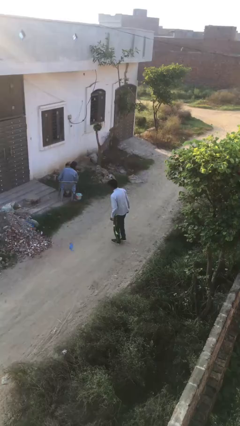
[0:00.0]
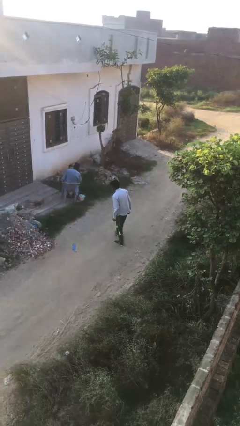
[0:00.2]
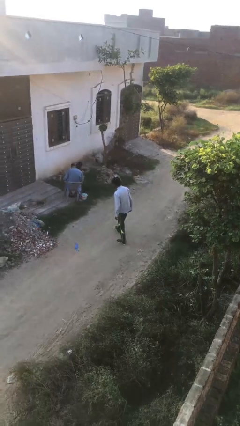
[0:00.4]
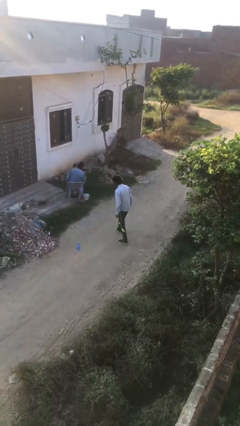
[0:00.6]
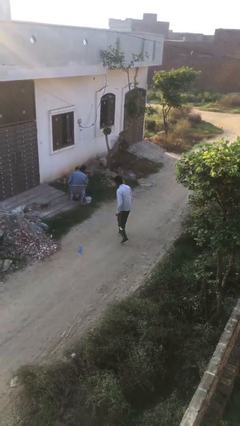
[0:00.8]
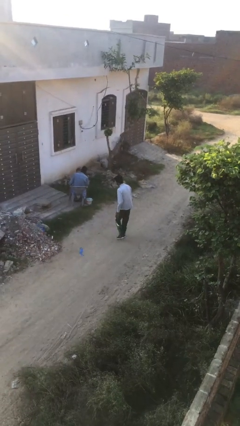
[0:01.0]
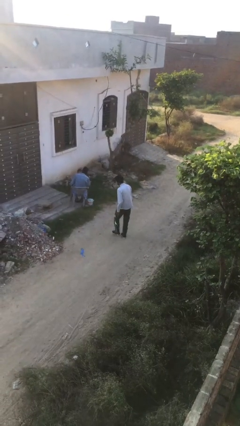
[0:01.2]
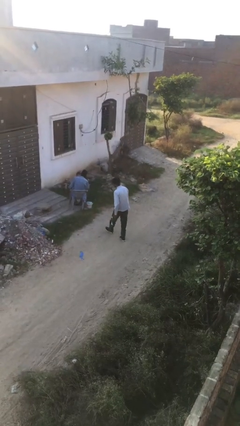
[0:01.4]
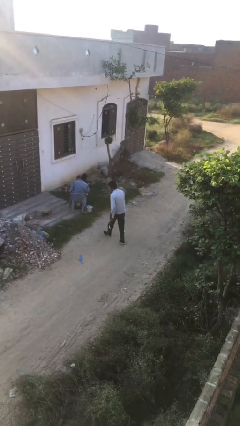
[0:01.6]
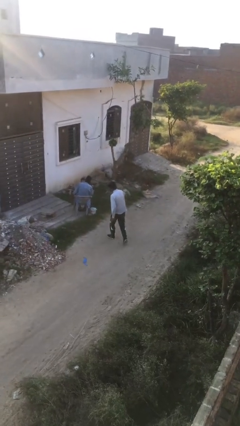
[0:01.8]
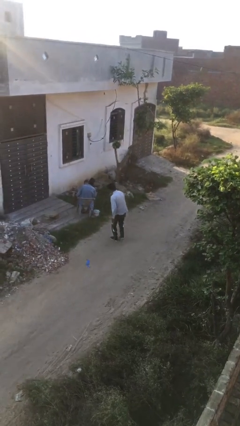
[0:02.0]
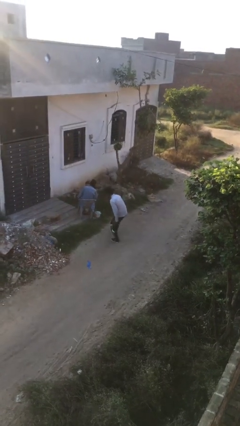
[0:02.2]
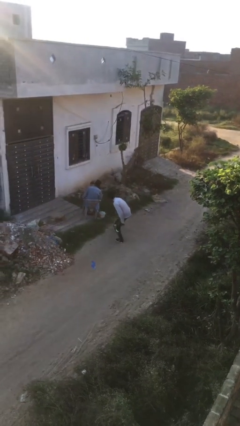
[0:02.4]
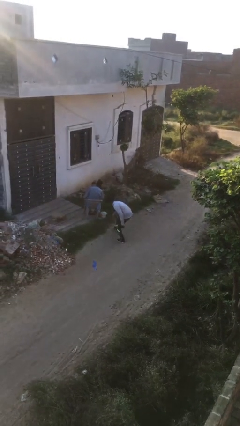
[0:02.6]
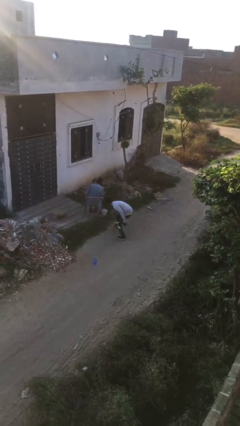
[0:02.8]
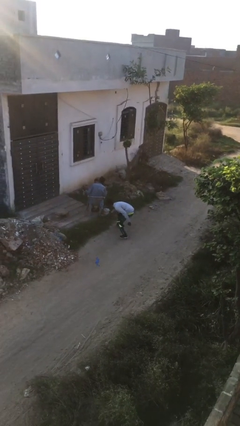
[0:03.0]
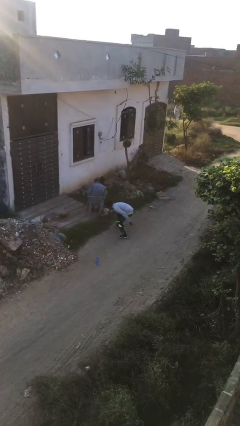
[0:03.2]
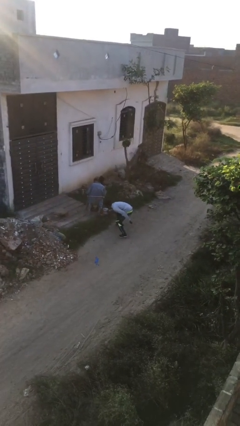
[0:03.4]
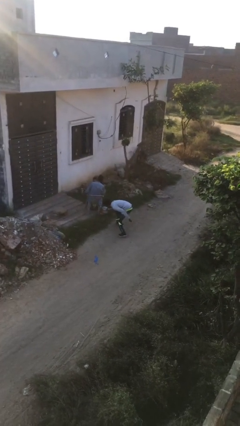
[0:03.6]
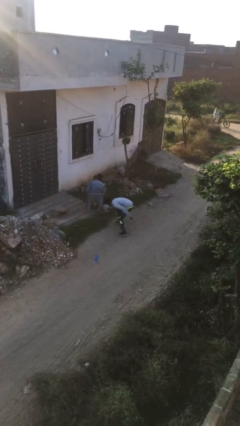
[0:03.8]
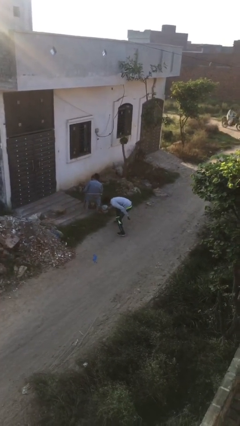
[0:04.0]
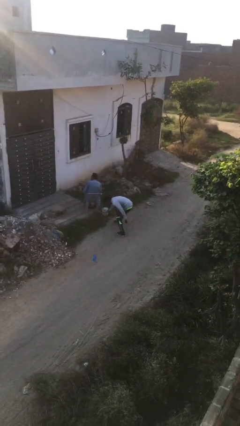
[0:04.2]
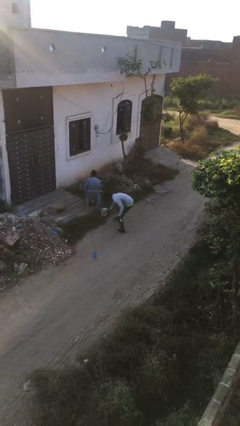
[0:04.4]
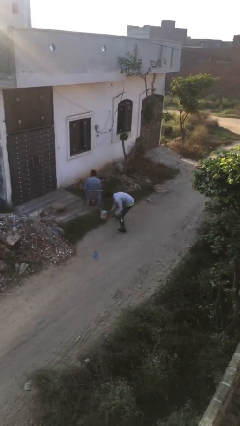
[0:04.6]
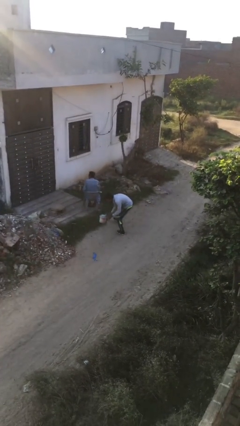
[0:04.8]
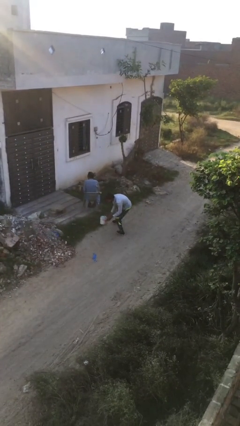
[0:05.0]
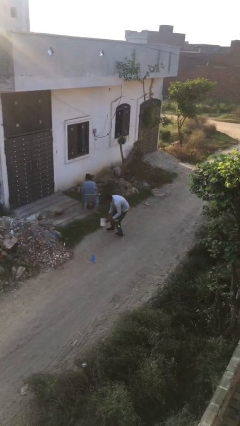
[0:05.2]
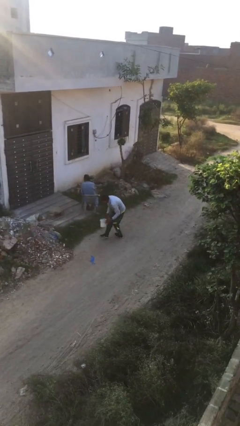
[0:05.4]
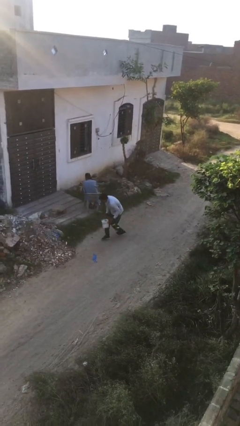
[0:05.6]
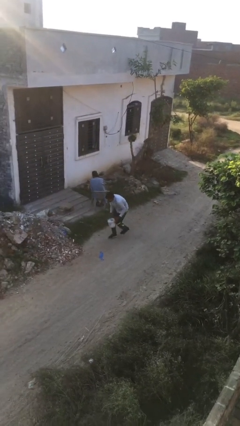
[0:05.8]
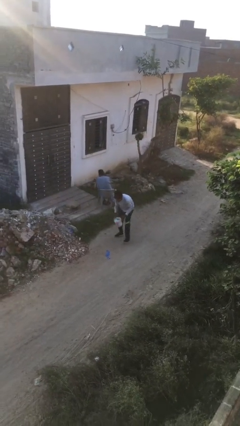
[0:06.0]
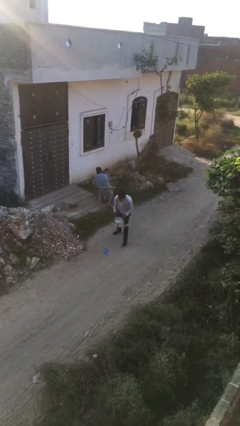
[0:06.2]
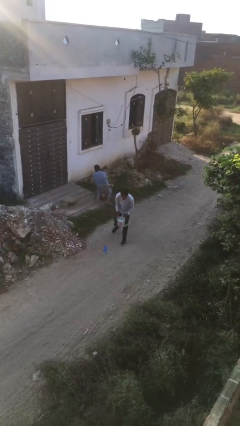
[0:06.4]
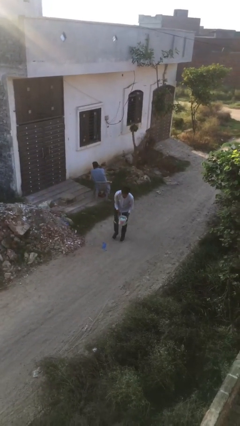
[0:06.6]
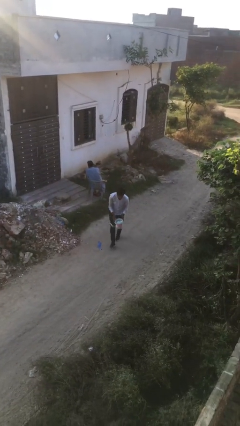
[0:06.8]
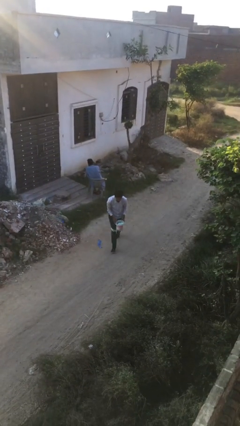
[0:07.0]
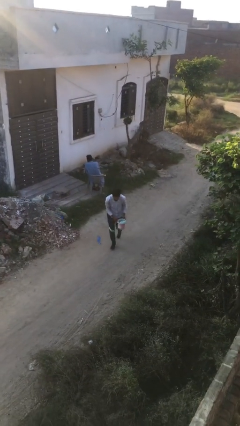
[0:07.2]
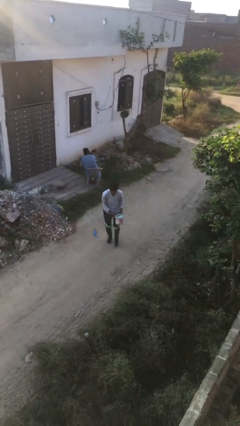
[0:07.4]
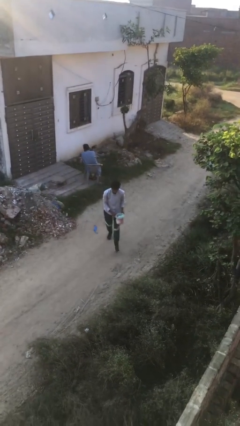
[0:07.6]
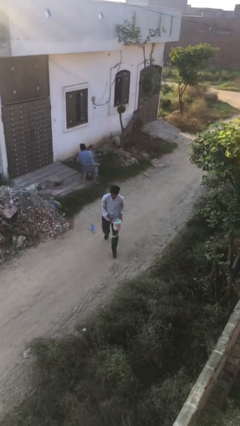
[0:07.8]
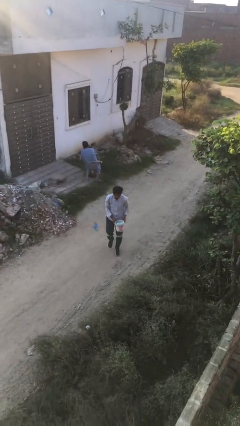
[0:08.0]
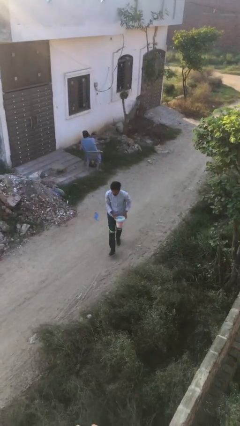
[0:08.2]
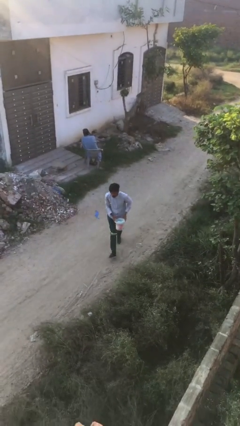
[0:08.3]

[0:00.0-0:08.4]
person steals object from person

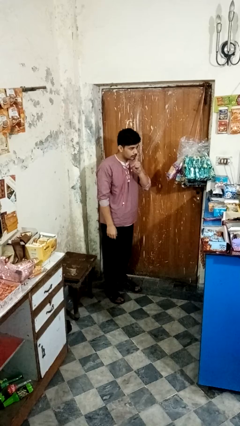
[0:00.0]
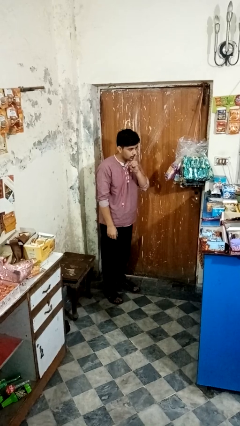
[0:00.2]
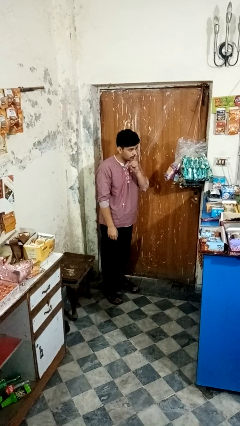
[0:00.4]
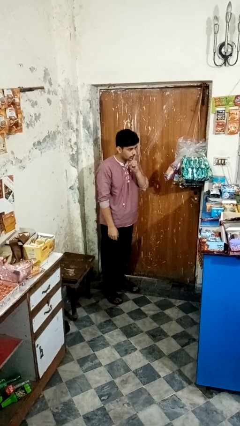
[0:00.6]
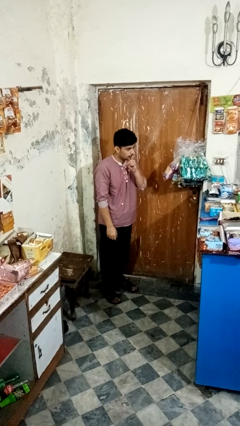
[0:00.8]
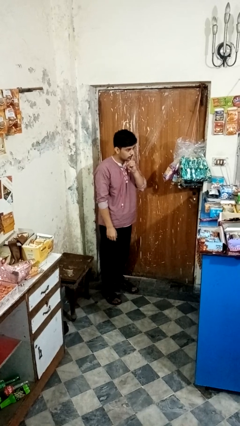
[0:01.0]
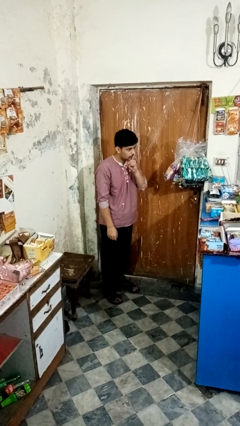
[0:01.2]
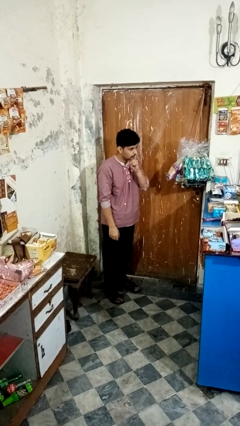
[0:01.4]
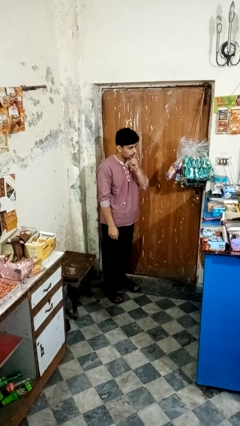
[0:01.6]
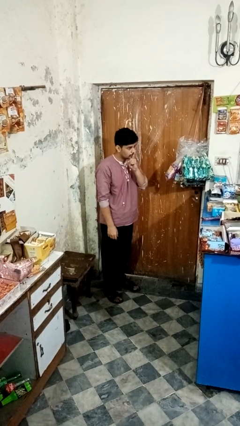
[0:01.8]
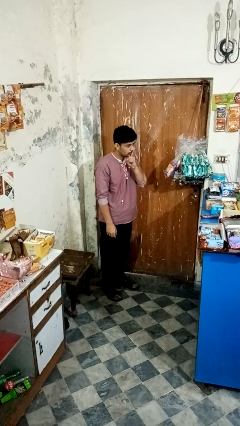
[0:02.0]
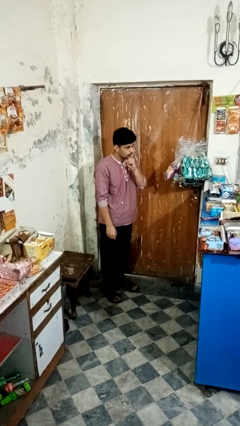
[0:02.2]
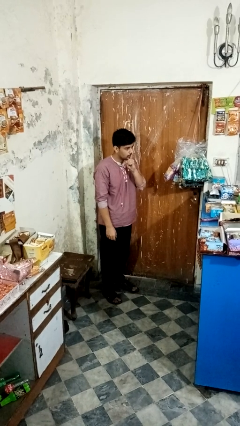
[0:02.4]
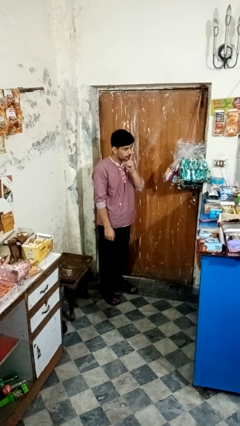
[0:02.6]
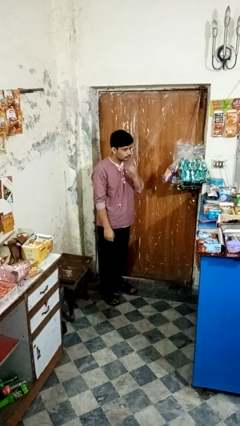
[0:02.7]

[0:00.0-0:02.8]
person gestures be quiet

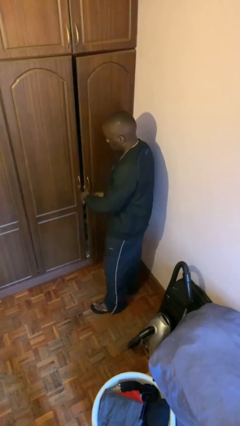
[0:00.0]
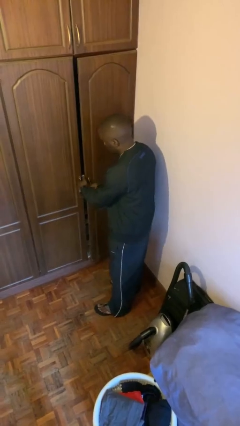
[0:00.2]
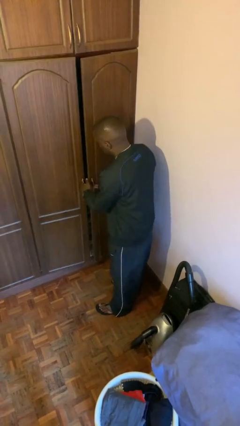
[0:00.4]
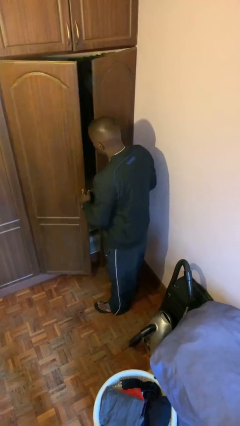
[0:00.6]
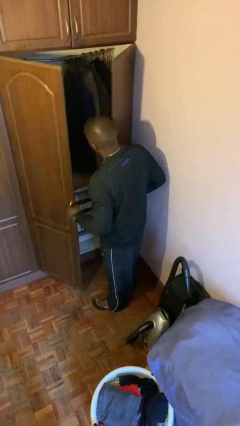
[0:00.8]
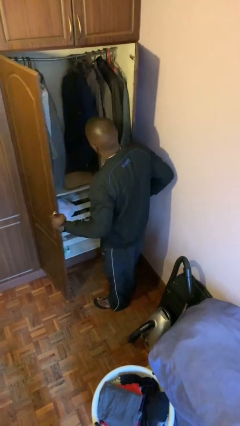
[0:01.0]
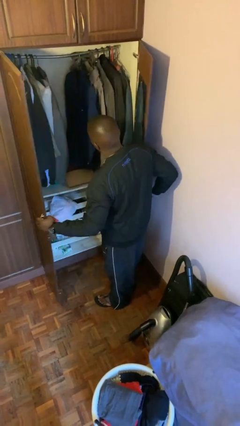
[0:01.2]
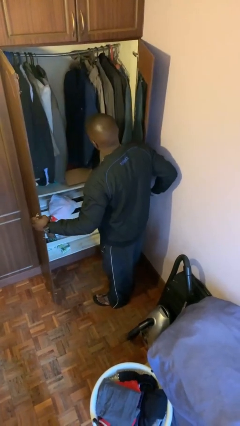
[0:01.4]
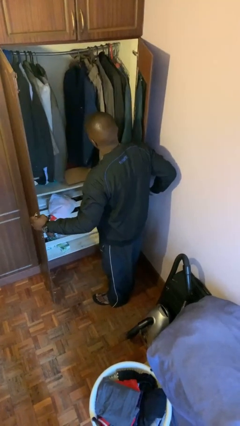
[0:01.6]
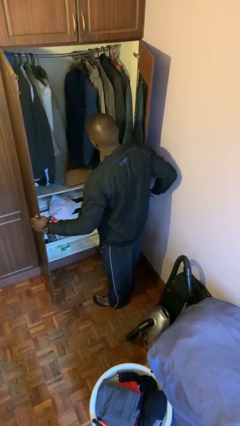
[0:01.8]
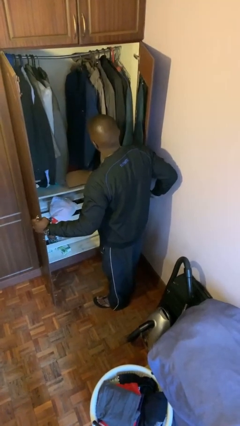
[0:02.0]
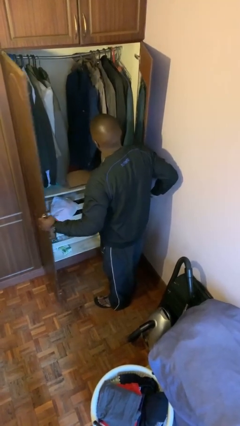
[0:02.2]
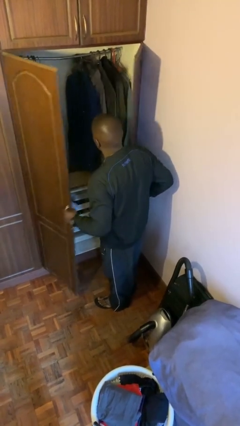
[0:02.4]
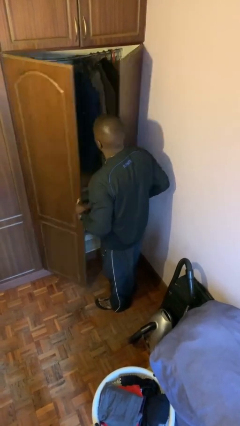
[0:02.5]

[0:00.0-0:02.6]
person opens closet door

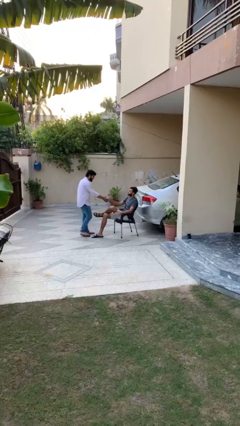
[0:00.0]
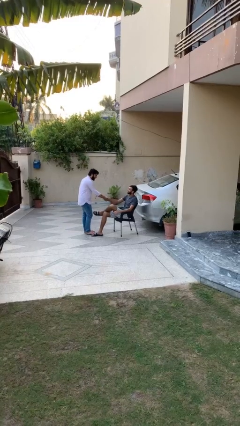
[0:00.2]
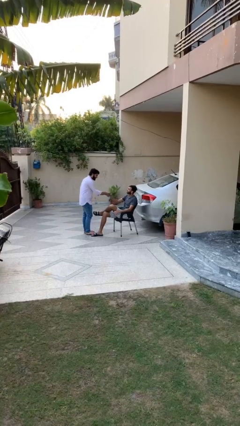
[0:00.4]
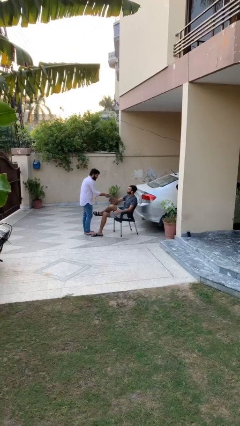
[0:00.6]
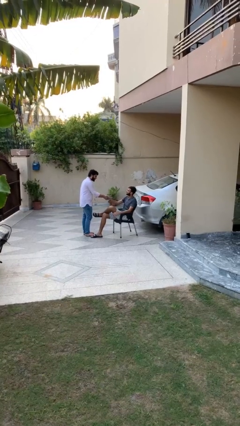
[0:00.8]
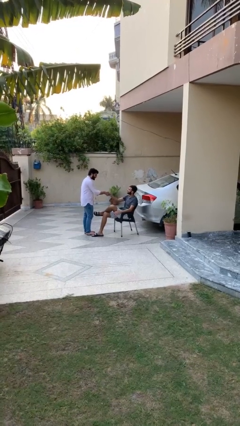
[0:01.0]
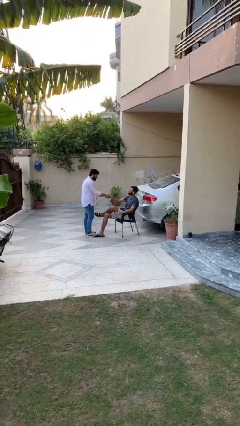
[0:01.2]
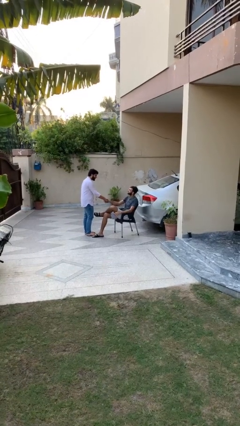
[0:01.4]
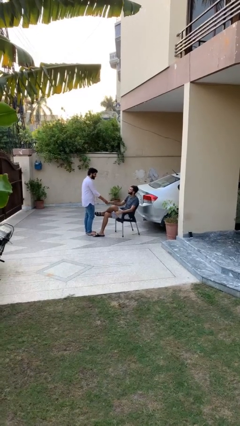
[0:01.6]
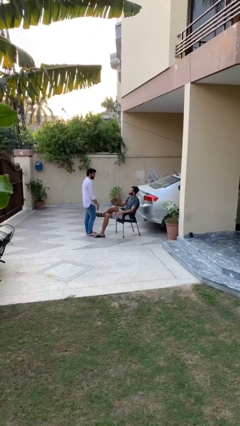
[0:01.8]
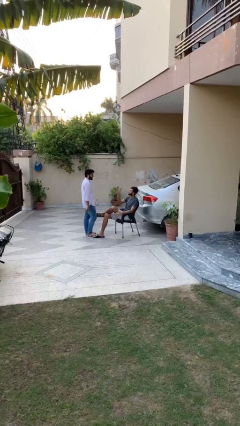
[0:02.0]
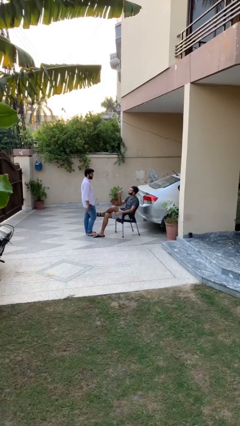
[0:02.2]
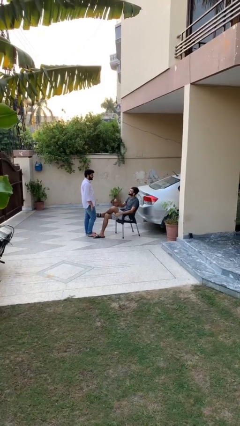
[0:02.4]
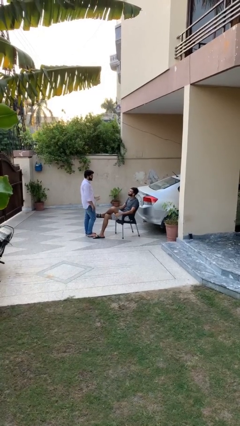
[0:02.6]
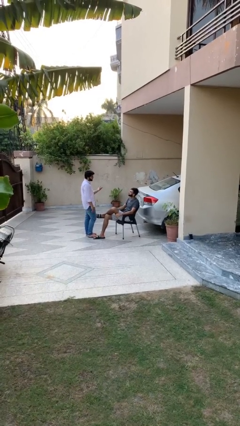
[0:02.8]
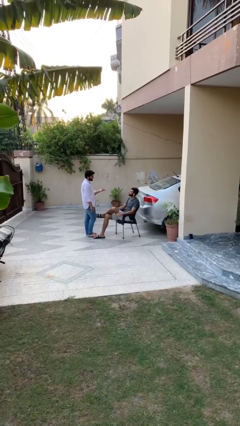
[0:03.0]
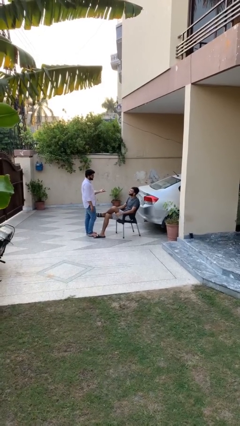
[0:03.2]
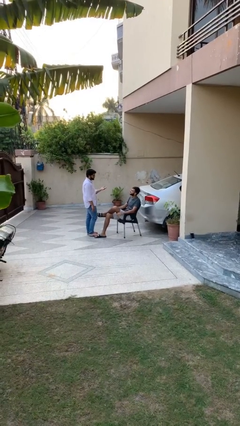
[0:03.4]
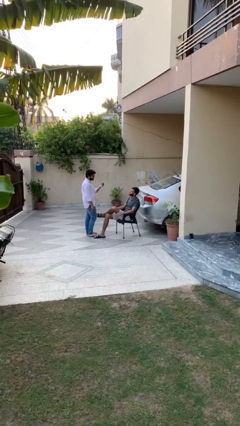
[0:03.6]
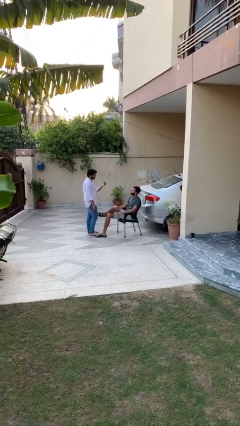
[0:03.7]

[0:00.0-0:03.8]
person shakes hand

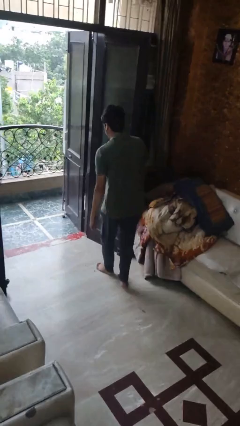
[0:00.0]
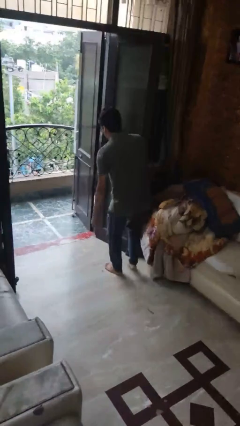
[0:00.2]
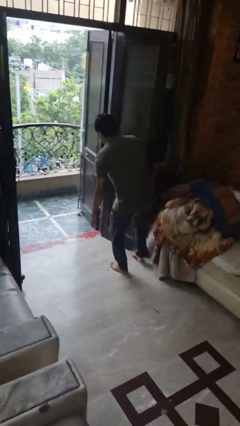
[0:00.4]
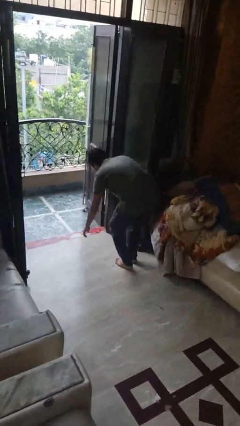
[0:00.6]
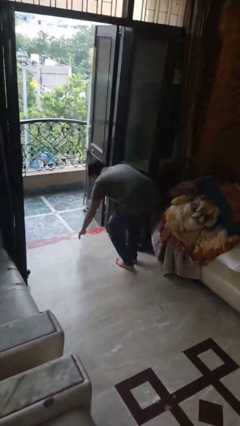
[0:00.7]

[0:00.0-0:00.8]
person trips on object on floor
